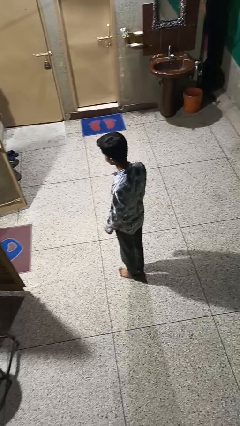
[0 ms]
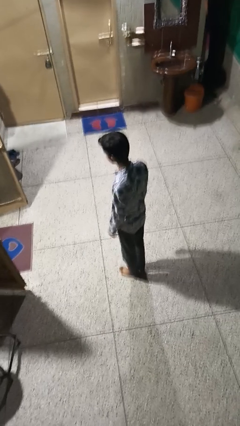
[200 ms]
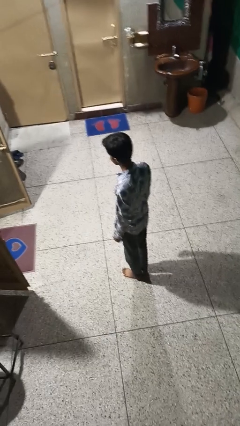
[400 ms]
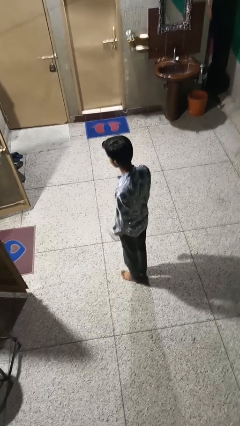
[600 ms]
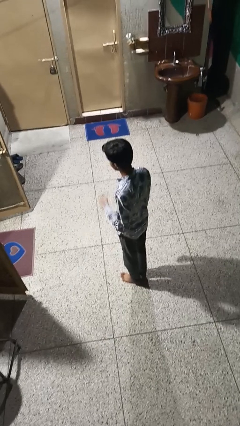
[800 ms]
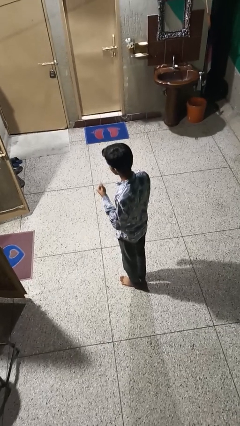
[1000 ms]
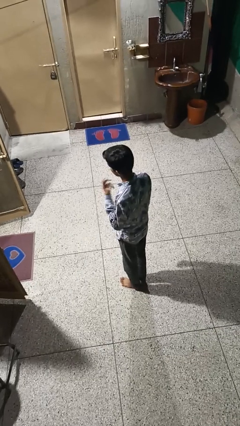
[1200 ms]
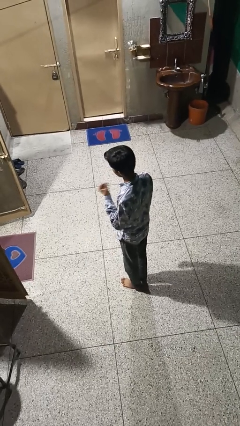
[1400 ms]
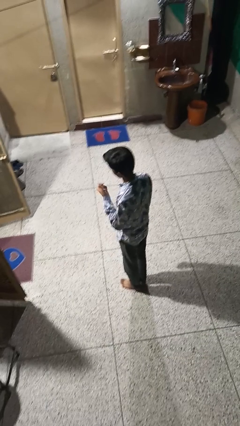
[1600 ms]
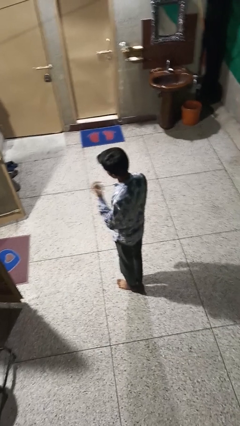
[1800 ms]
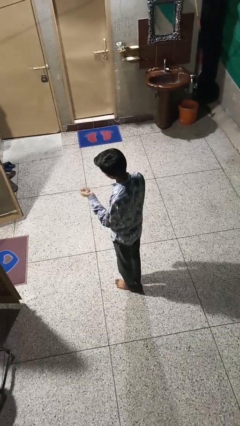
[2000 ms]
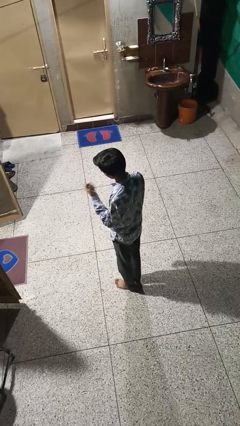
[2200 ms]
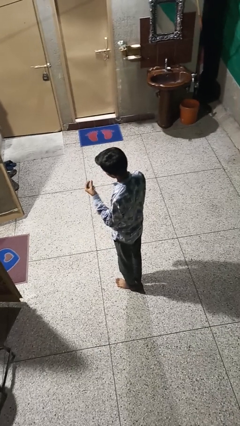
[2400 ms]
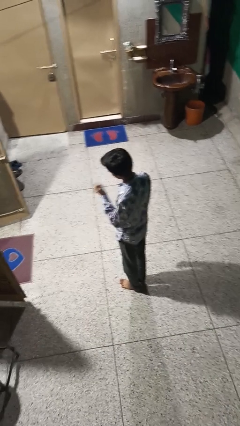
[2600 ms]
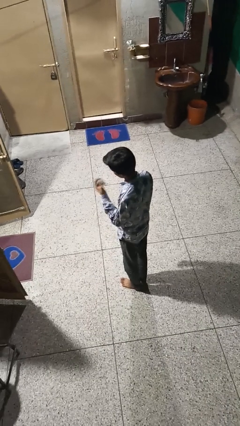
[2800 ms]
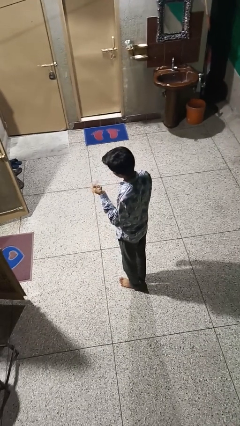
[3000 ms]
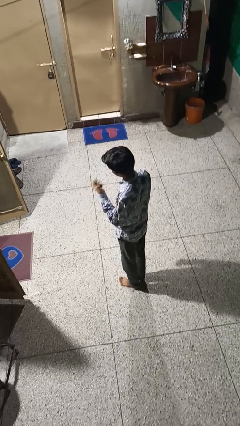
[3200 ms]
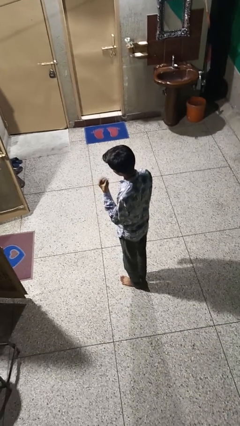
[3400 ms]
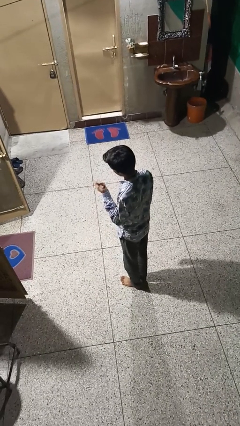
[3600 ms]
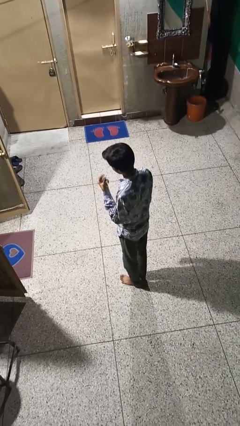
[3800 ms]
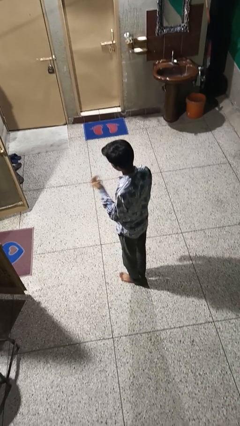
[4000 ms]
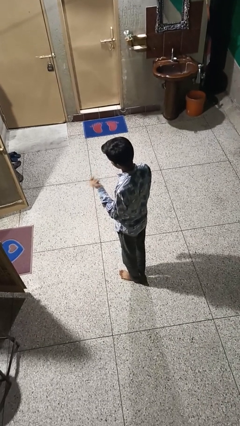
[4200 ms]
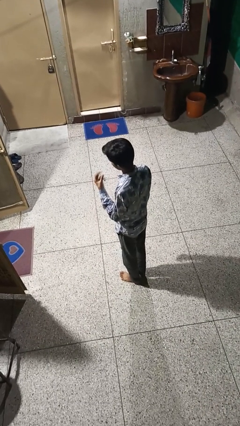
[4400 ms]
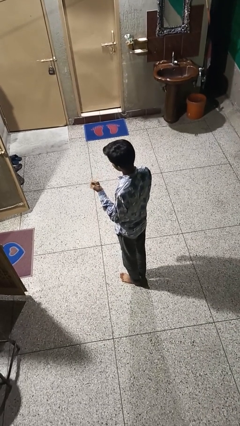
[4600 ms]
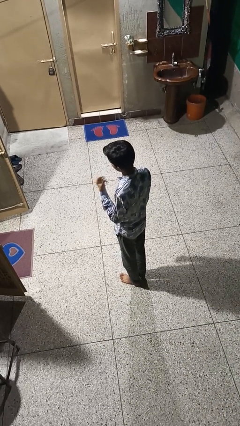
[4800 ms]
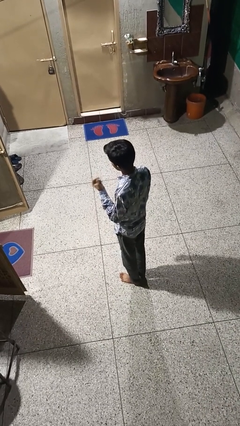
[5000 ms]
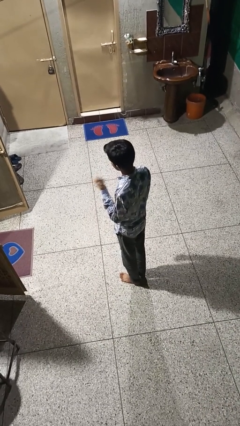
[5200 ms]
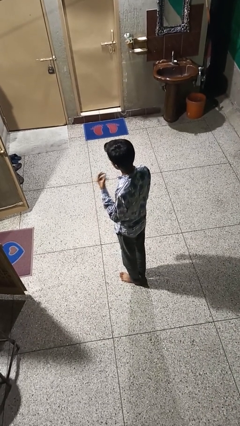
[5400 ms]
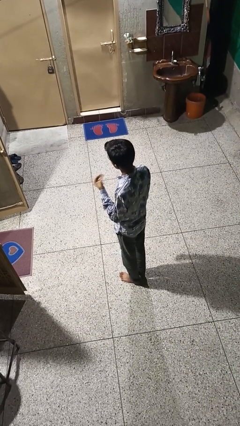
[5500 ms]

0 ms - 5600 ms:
person snaps fingers

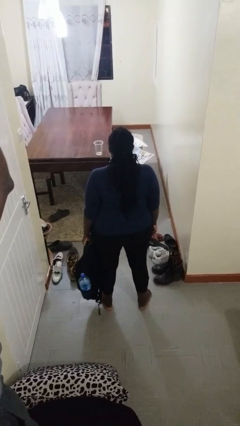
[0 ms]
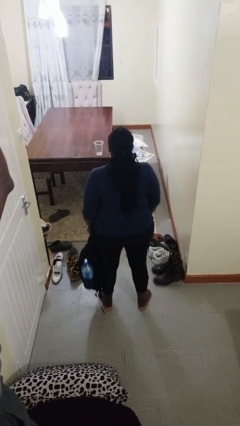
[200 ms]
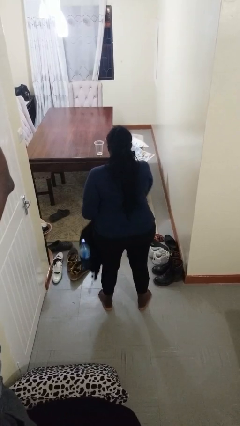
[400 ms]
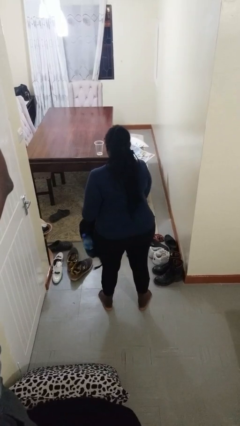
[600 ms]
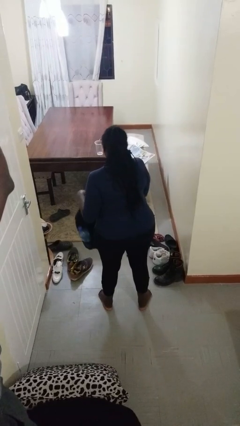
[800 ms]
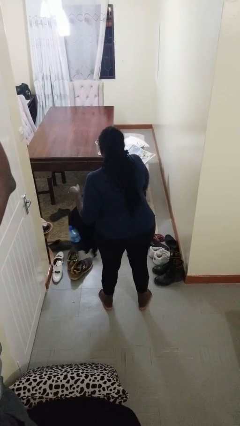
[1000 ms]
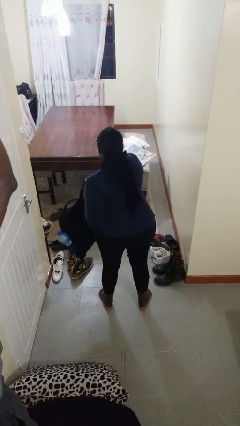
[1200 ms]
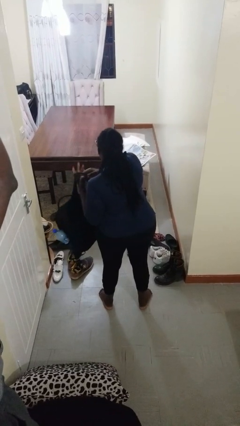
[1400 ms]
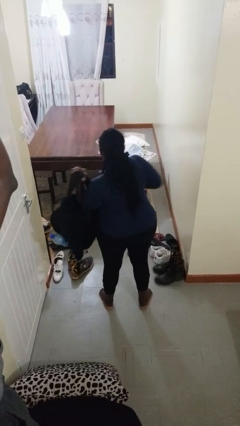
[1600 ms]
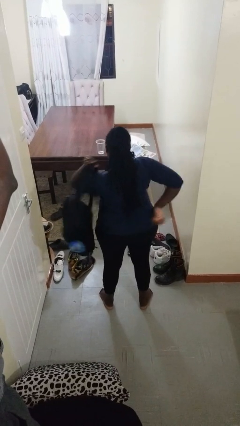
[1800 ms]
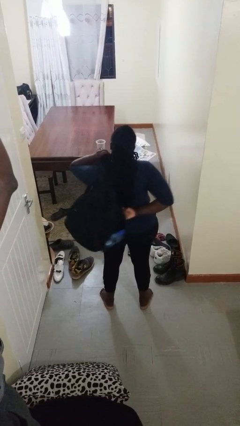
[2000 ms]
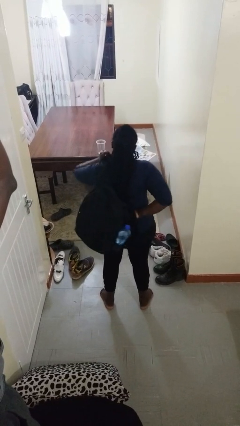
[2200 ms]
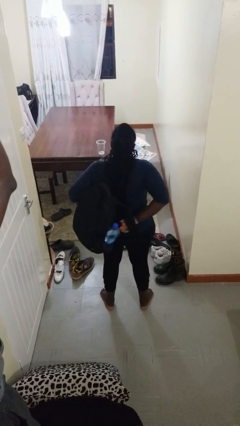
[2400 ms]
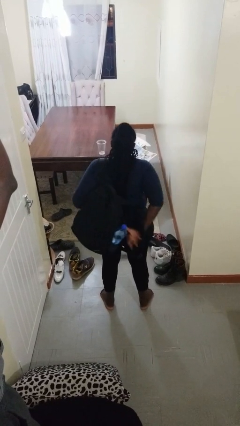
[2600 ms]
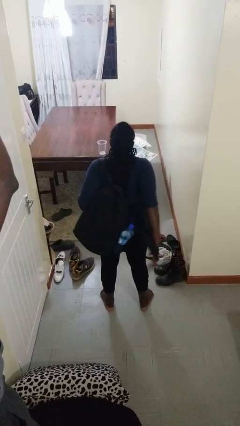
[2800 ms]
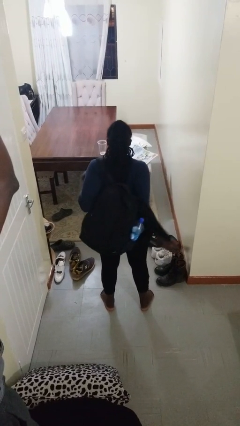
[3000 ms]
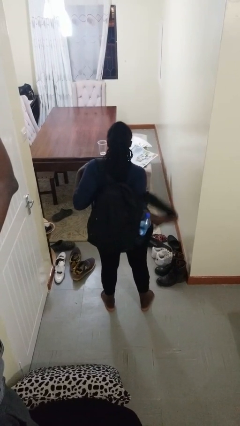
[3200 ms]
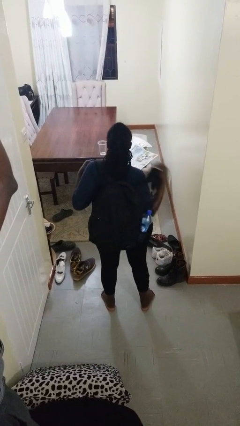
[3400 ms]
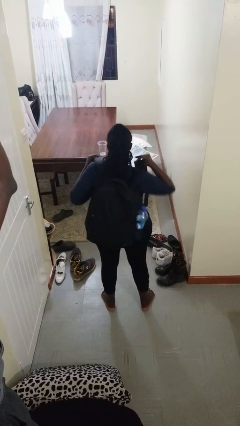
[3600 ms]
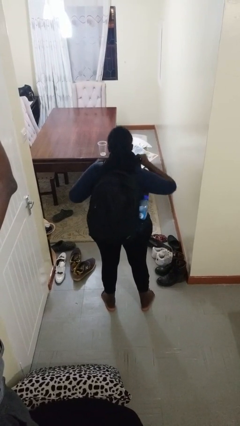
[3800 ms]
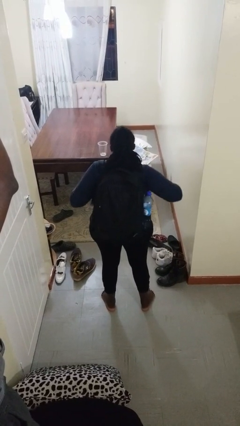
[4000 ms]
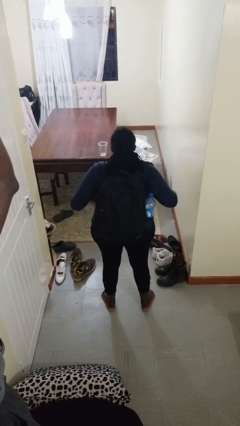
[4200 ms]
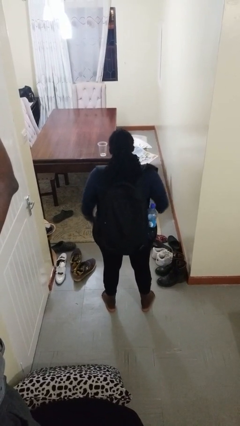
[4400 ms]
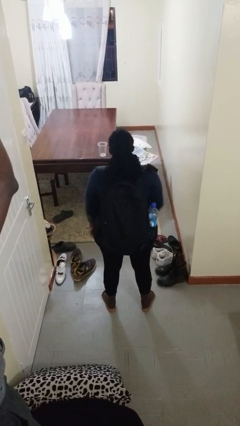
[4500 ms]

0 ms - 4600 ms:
person puts on backpack

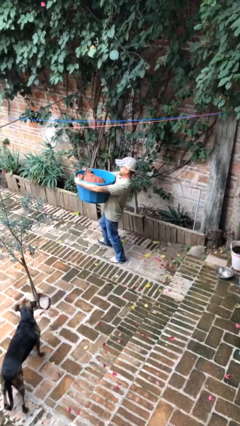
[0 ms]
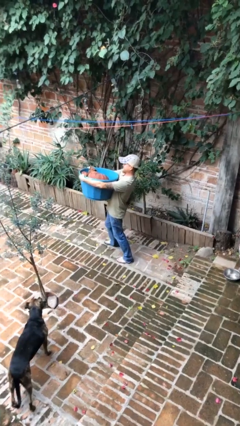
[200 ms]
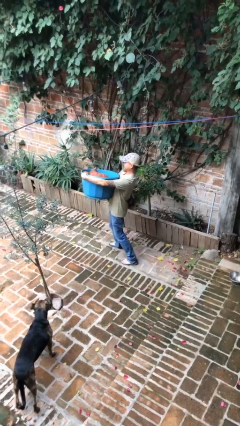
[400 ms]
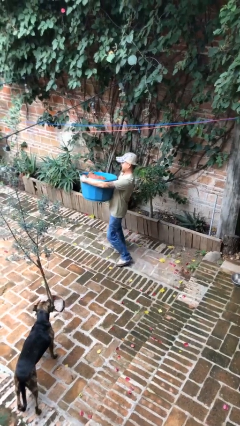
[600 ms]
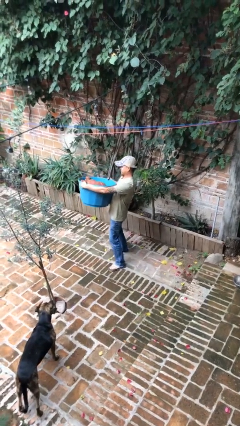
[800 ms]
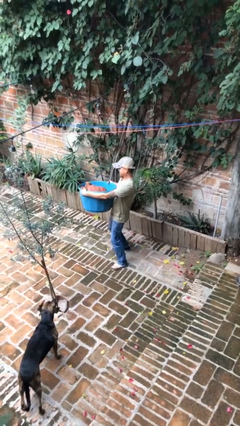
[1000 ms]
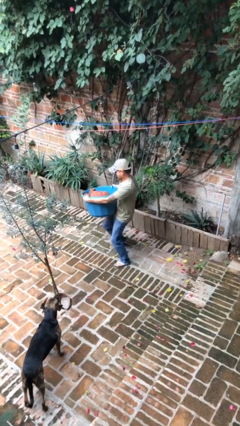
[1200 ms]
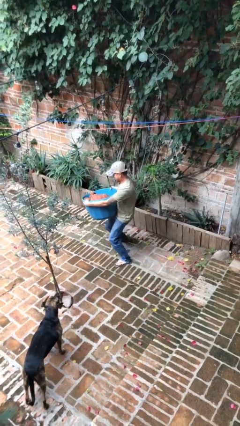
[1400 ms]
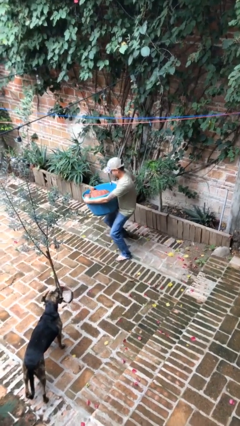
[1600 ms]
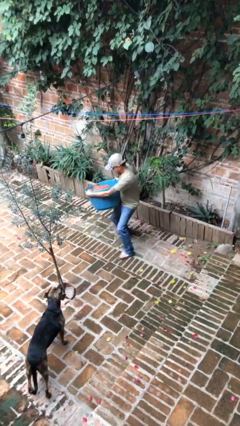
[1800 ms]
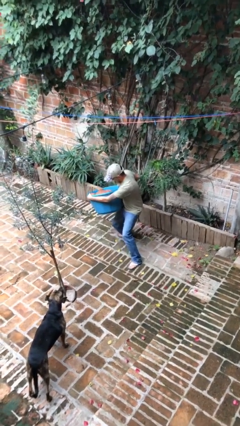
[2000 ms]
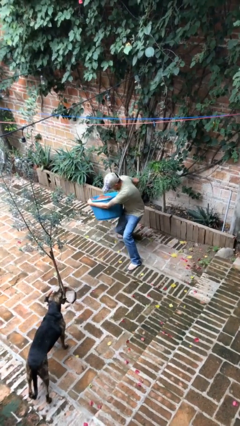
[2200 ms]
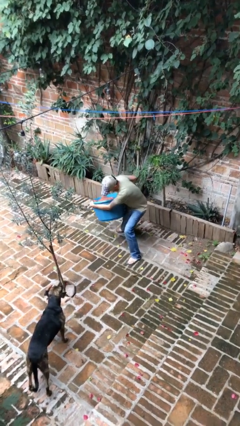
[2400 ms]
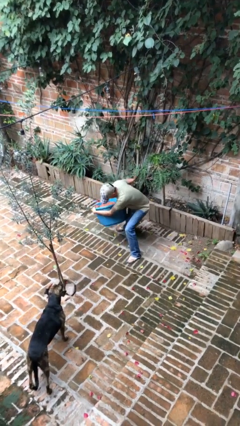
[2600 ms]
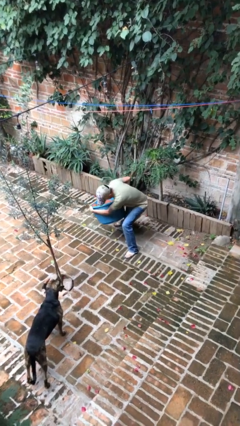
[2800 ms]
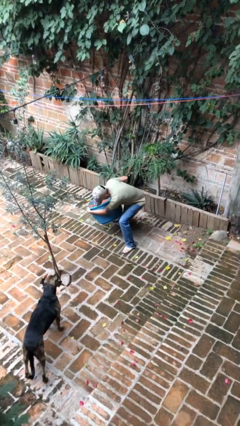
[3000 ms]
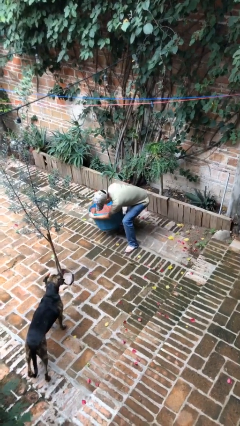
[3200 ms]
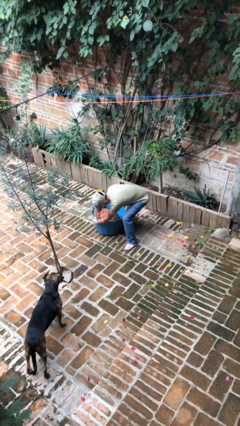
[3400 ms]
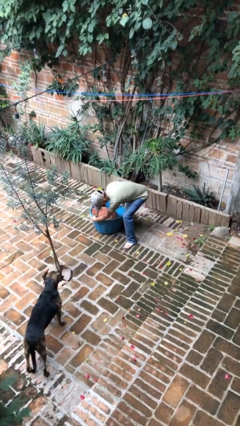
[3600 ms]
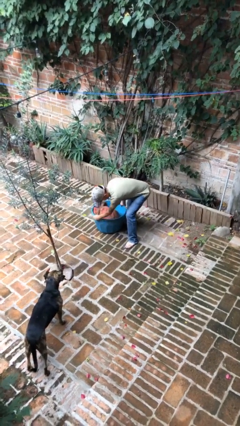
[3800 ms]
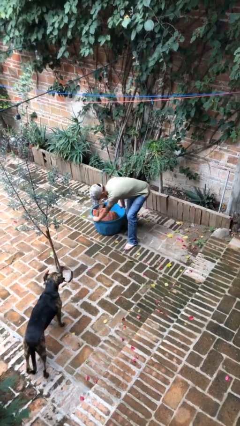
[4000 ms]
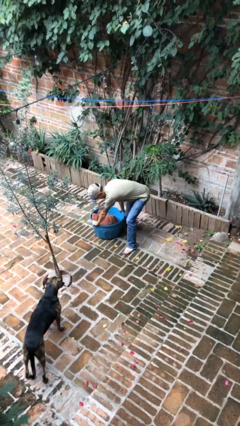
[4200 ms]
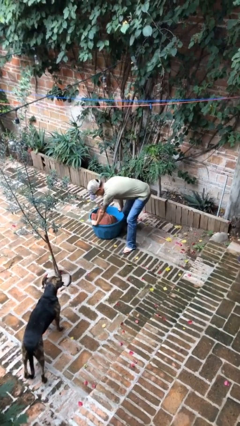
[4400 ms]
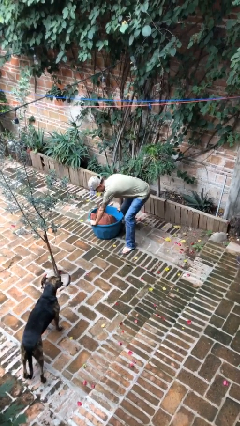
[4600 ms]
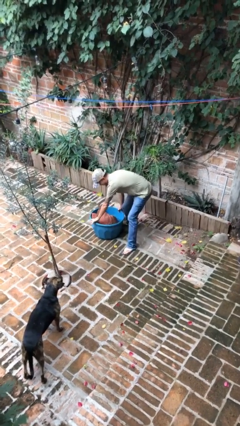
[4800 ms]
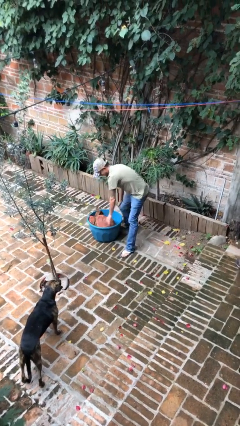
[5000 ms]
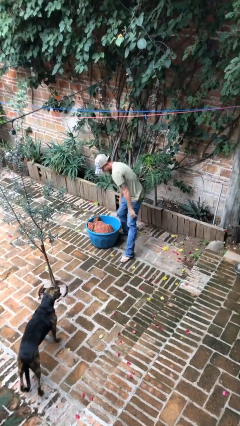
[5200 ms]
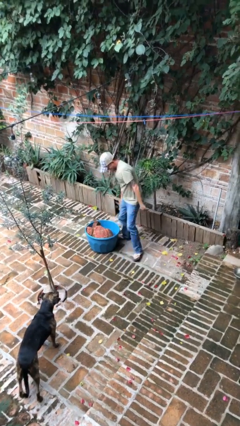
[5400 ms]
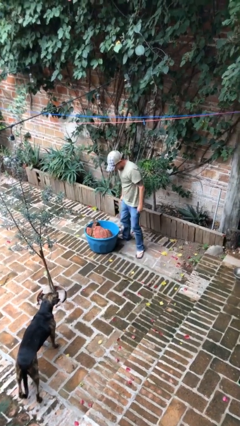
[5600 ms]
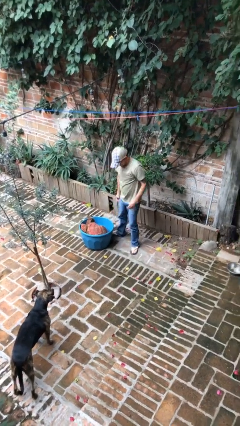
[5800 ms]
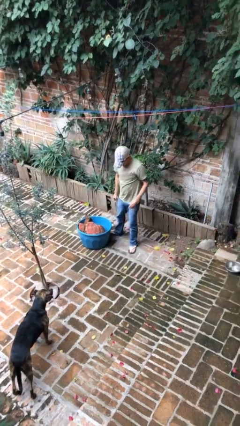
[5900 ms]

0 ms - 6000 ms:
person puts down object on floor

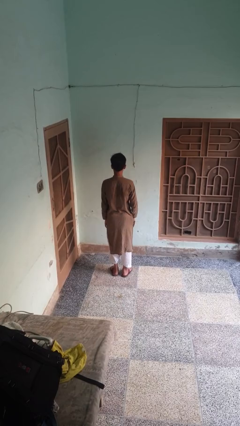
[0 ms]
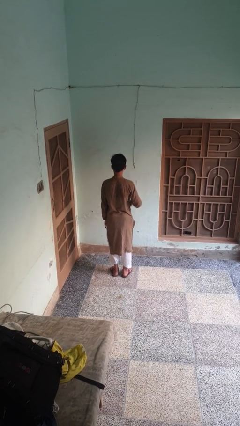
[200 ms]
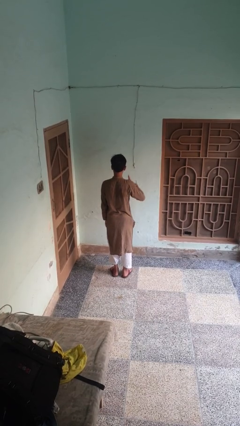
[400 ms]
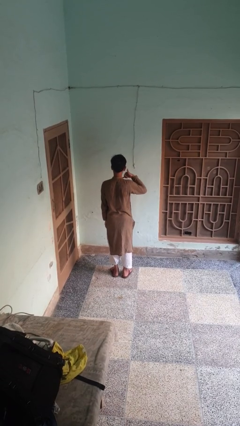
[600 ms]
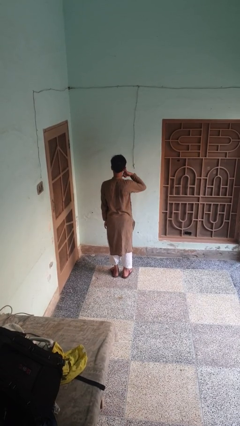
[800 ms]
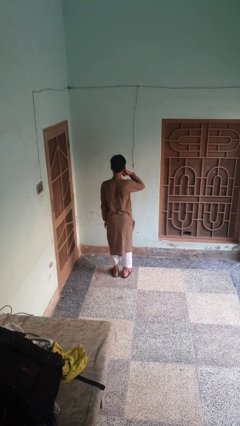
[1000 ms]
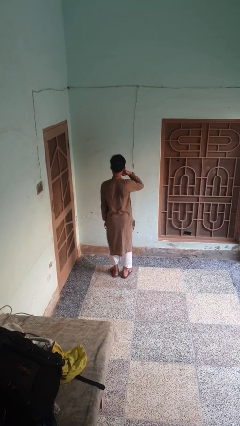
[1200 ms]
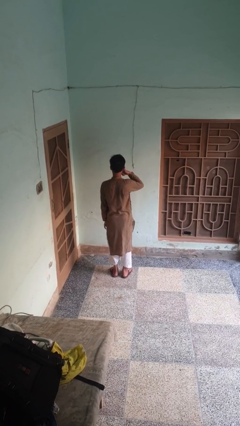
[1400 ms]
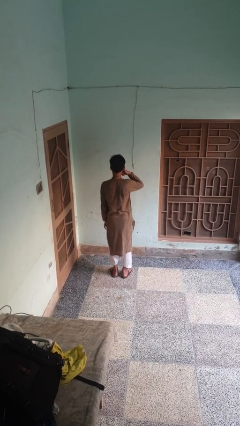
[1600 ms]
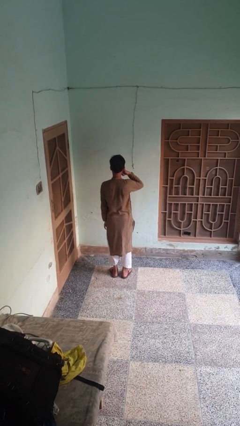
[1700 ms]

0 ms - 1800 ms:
person gestures call me
